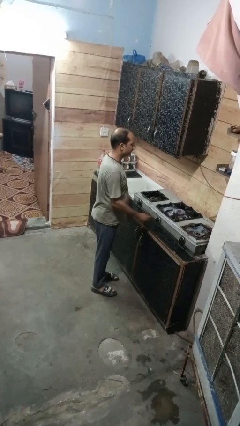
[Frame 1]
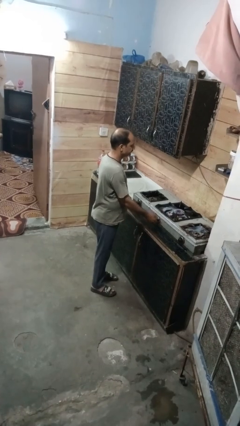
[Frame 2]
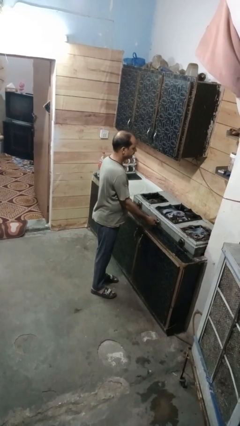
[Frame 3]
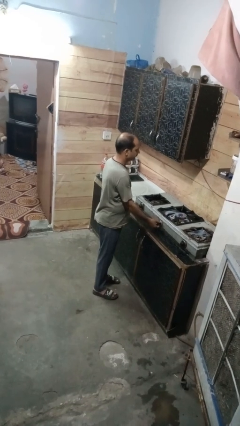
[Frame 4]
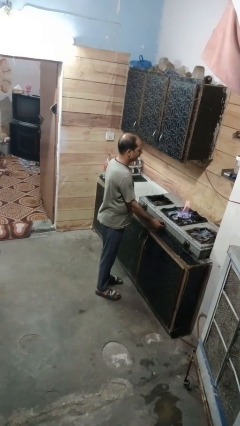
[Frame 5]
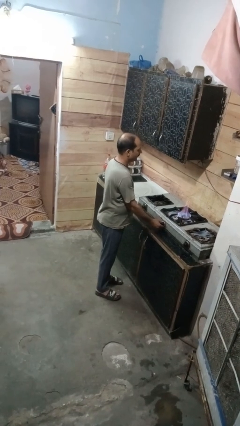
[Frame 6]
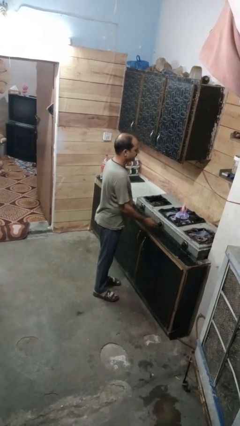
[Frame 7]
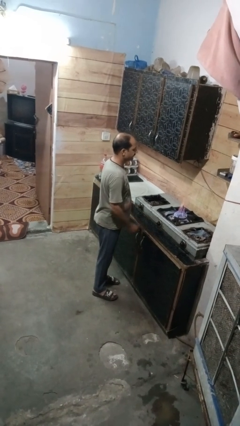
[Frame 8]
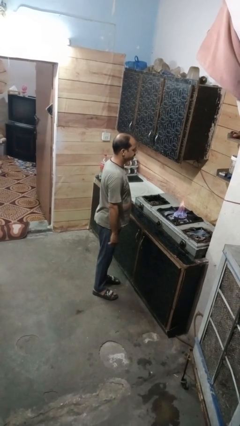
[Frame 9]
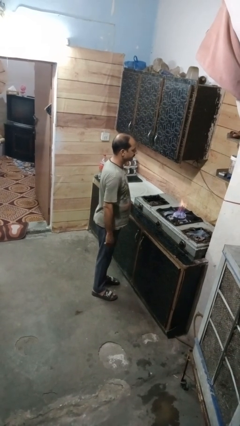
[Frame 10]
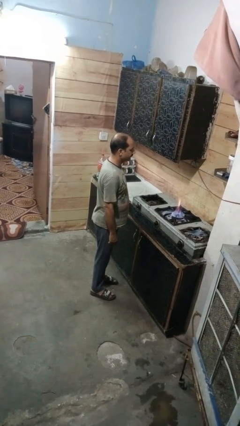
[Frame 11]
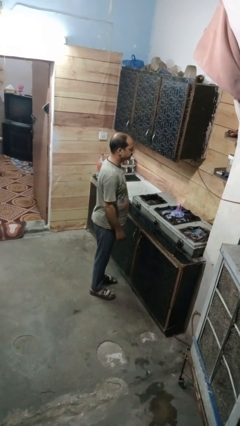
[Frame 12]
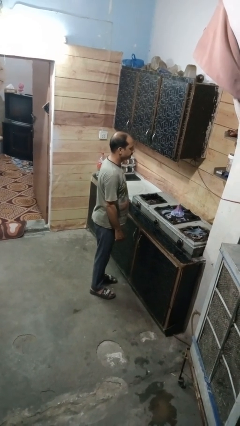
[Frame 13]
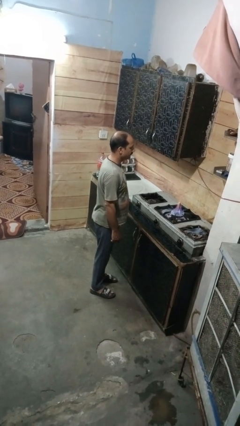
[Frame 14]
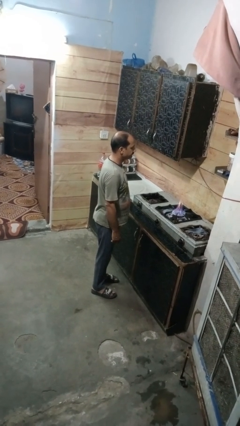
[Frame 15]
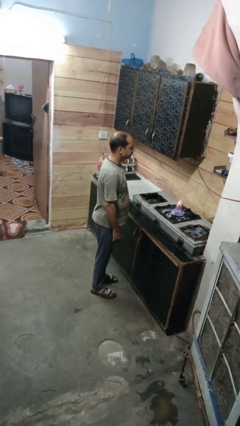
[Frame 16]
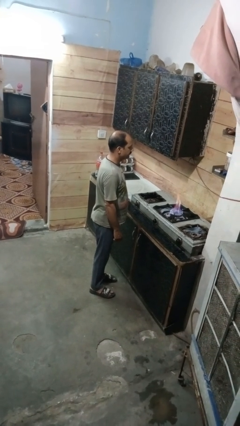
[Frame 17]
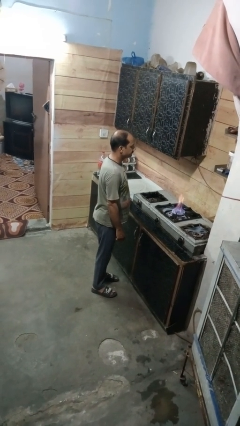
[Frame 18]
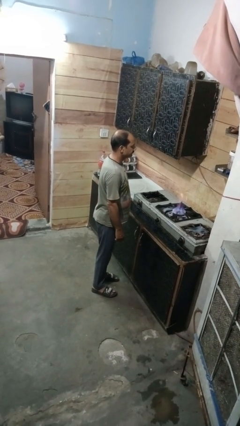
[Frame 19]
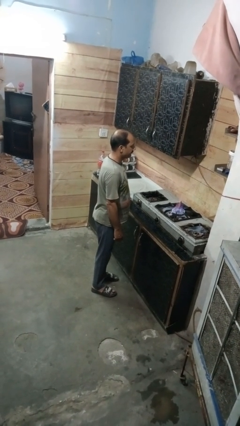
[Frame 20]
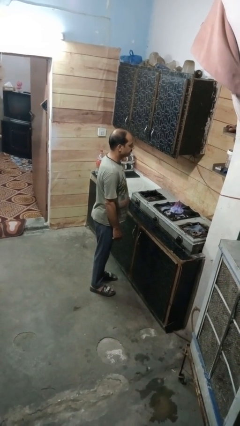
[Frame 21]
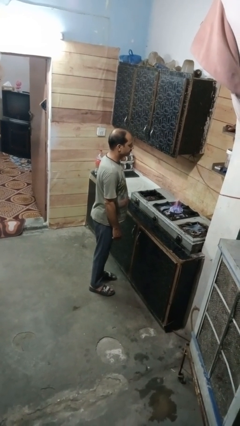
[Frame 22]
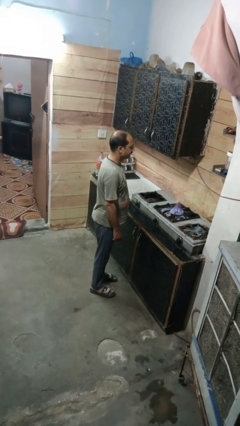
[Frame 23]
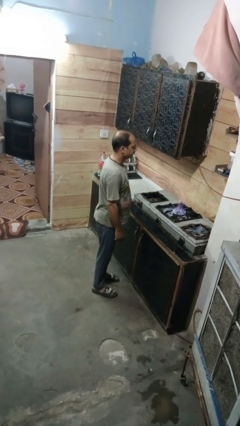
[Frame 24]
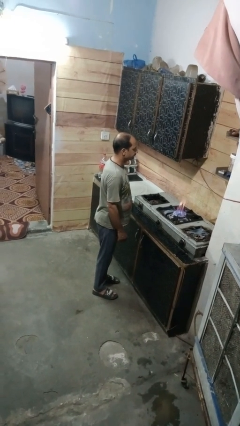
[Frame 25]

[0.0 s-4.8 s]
person turns on stovetop

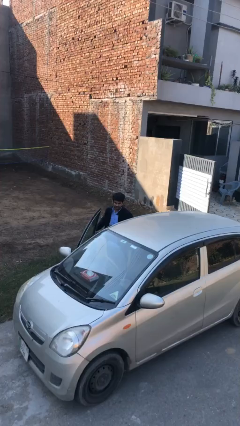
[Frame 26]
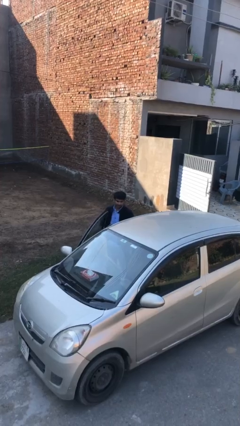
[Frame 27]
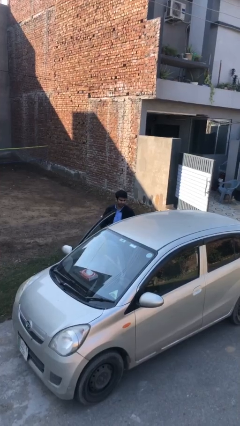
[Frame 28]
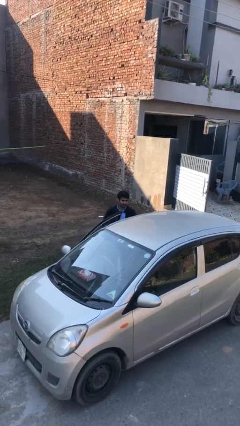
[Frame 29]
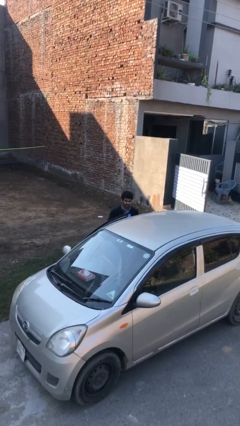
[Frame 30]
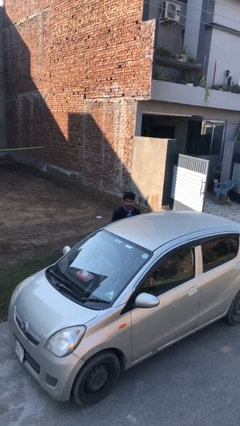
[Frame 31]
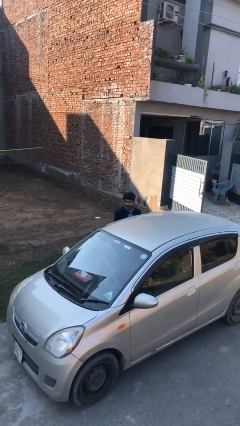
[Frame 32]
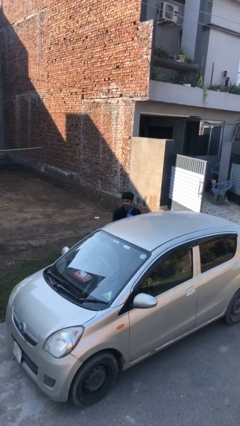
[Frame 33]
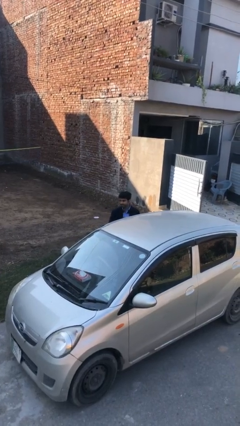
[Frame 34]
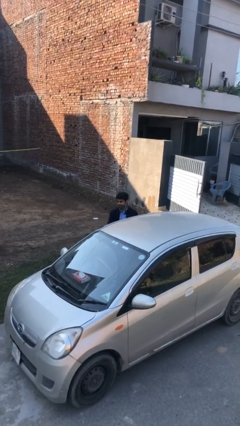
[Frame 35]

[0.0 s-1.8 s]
person closes car door

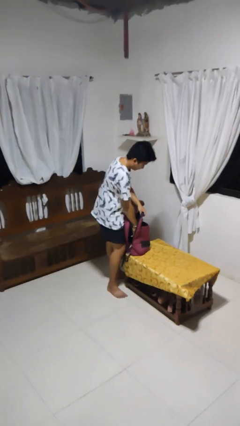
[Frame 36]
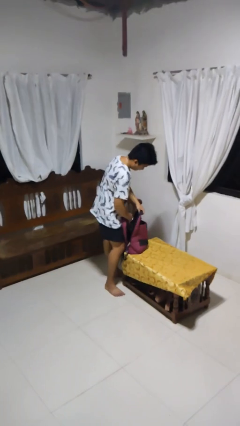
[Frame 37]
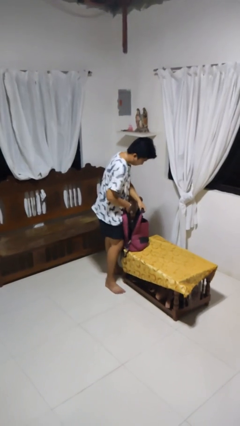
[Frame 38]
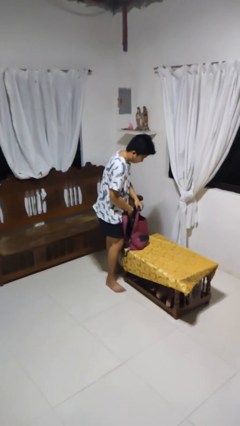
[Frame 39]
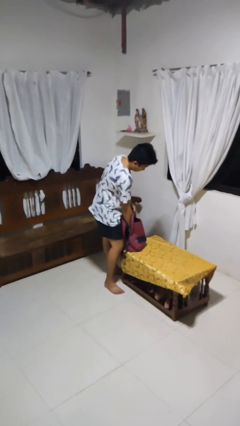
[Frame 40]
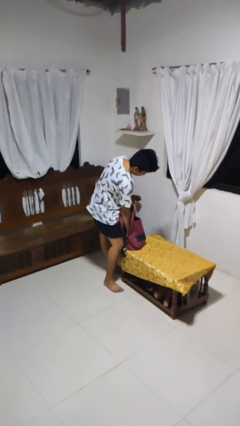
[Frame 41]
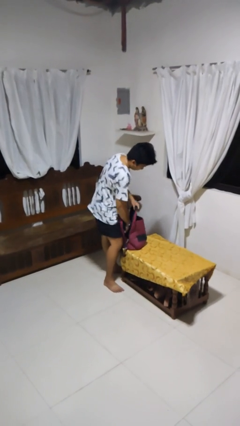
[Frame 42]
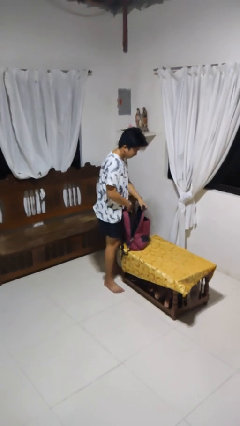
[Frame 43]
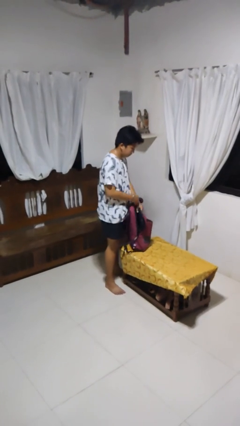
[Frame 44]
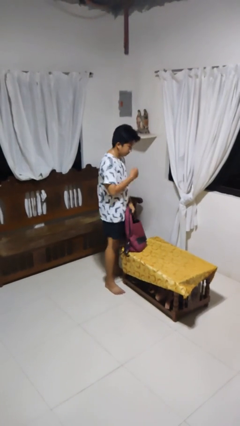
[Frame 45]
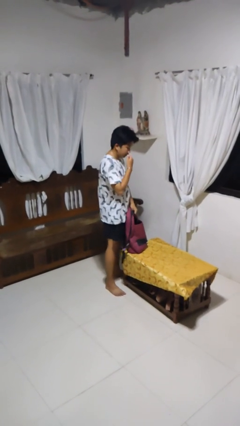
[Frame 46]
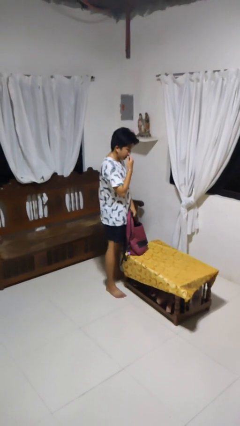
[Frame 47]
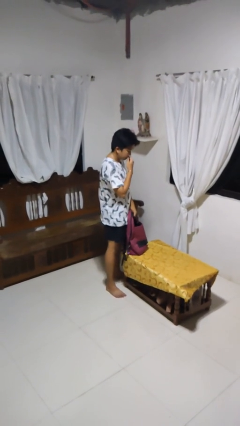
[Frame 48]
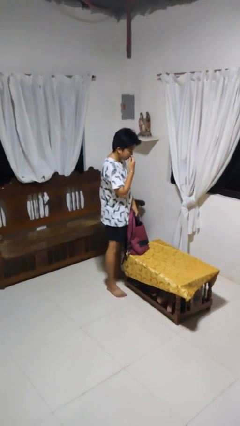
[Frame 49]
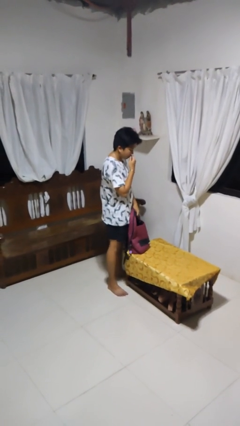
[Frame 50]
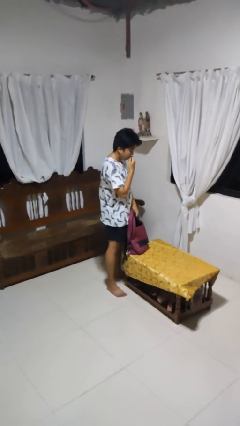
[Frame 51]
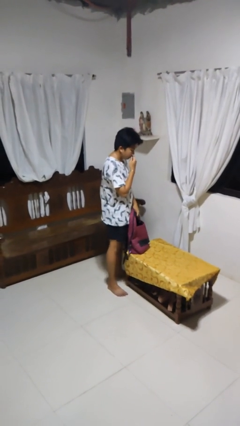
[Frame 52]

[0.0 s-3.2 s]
person eats snack from bag

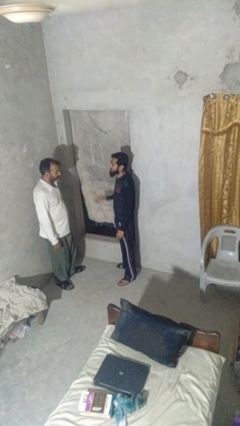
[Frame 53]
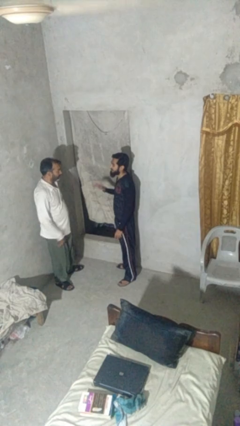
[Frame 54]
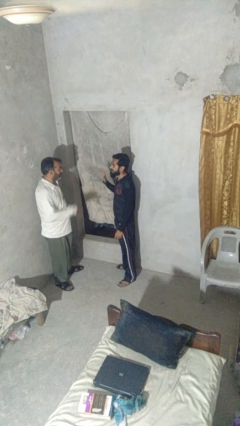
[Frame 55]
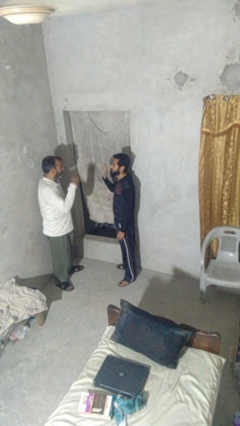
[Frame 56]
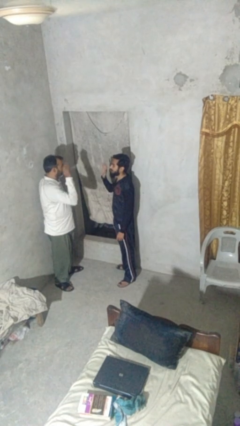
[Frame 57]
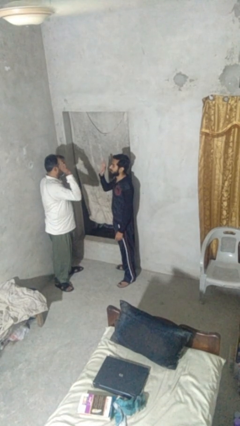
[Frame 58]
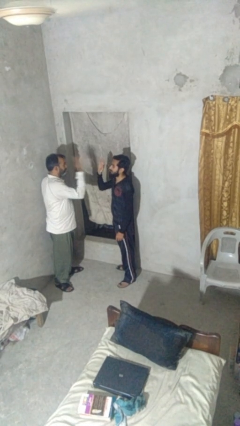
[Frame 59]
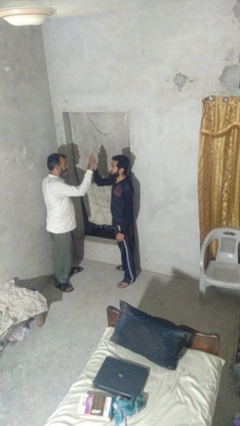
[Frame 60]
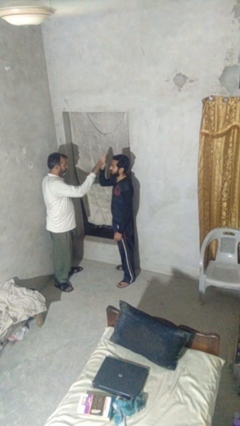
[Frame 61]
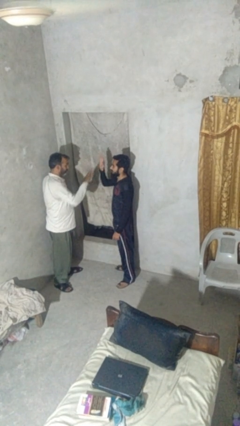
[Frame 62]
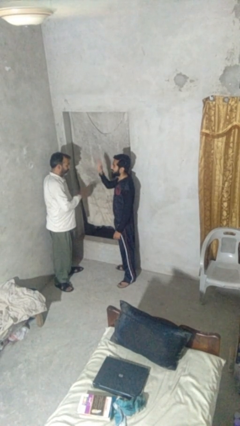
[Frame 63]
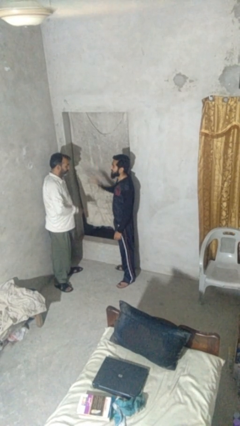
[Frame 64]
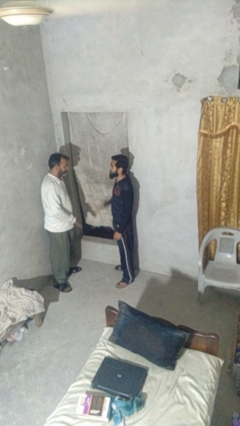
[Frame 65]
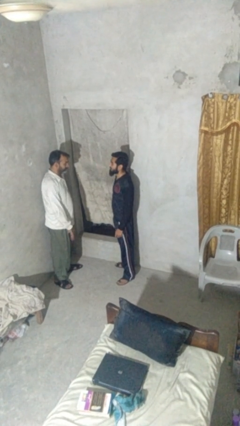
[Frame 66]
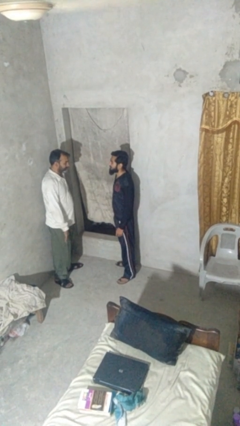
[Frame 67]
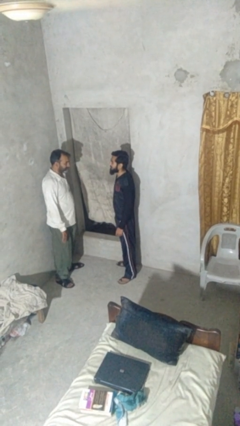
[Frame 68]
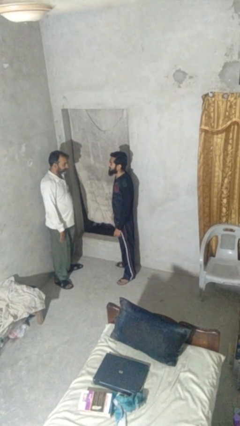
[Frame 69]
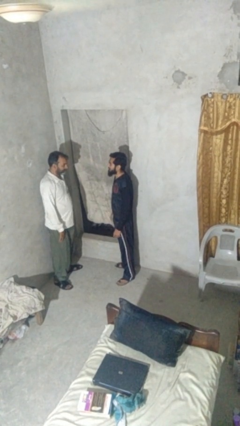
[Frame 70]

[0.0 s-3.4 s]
person highfives hand

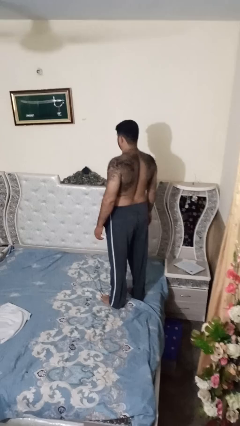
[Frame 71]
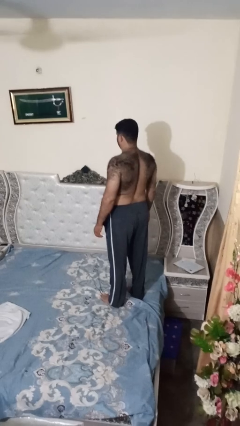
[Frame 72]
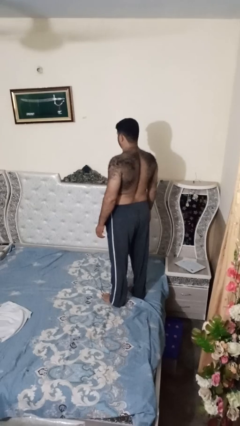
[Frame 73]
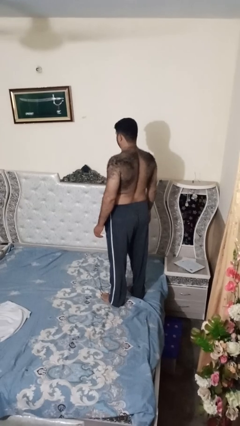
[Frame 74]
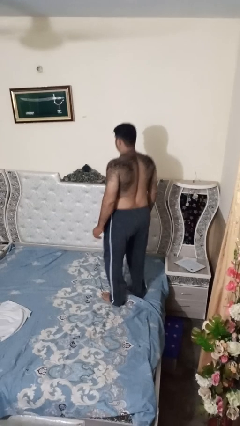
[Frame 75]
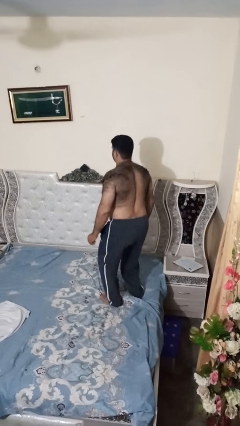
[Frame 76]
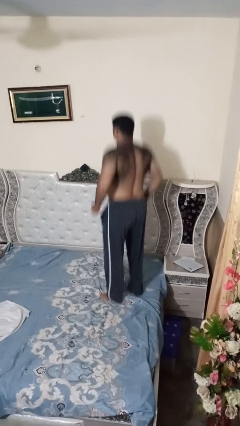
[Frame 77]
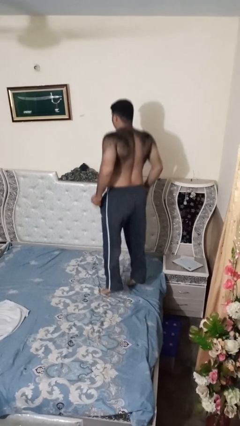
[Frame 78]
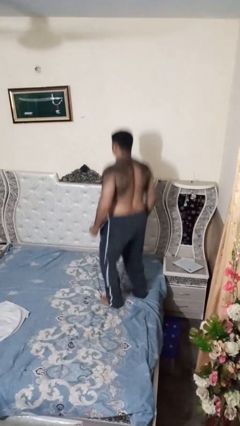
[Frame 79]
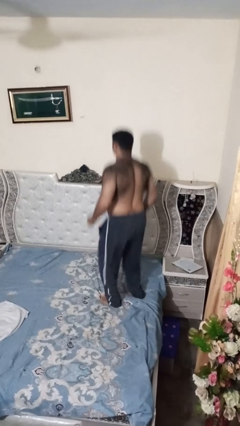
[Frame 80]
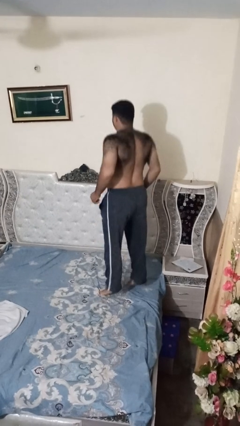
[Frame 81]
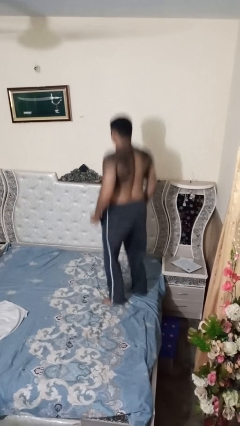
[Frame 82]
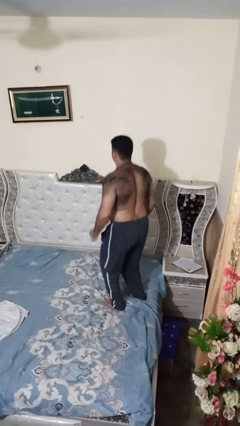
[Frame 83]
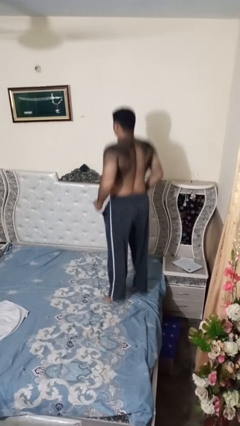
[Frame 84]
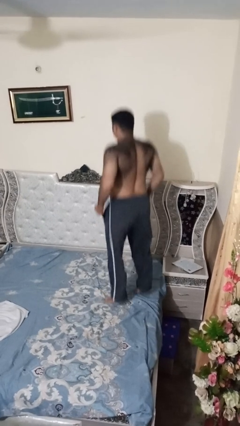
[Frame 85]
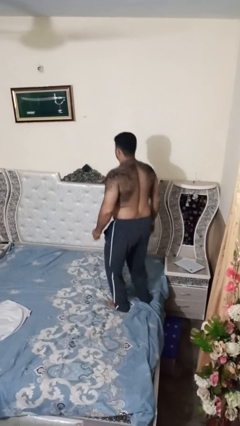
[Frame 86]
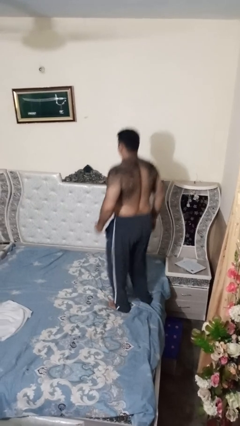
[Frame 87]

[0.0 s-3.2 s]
person jumps on bed

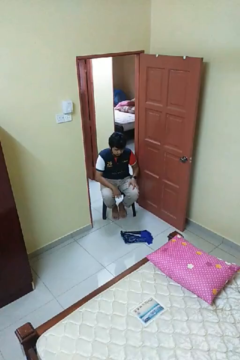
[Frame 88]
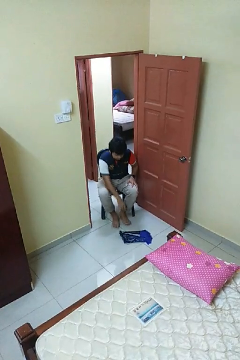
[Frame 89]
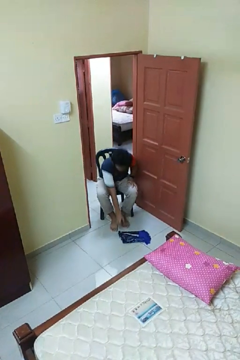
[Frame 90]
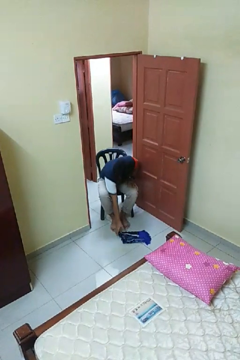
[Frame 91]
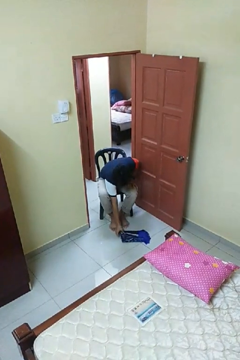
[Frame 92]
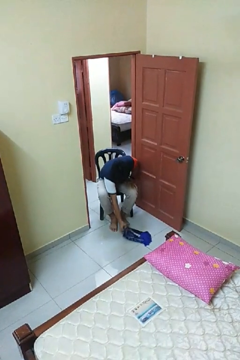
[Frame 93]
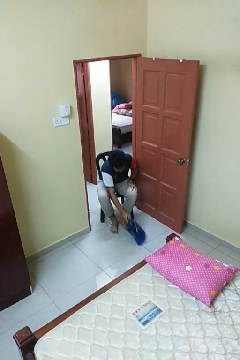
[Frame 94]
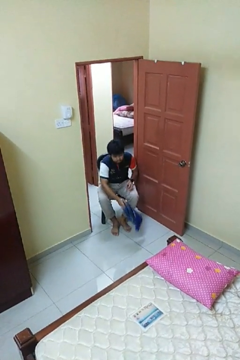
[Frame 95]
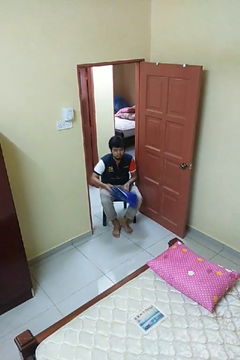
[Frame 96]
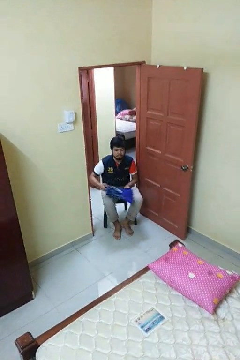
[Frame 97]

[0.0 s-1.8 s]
person picks up object from floor
